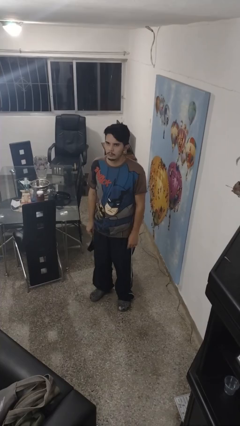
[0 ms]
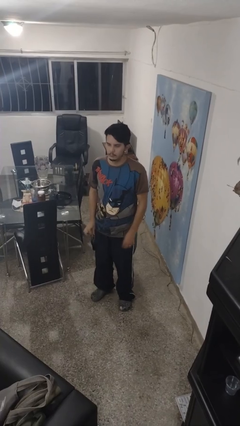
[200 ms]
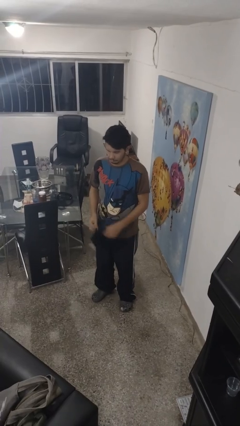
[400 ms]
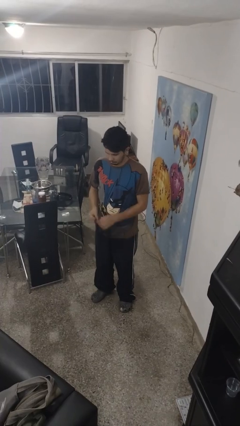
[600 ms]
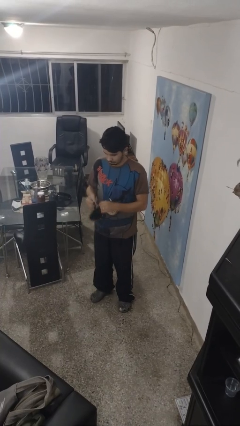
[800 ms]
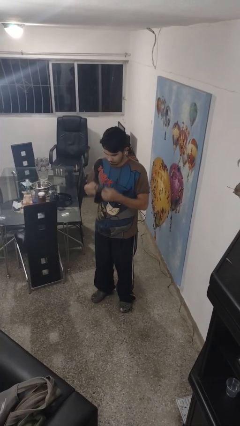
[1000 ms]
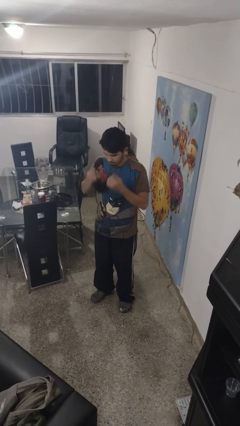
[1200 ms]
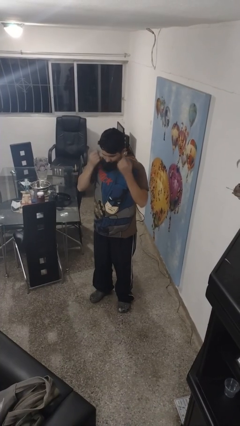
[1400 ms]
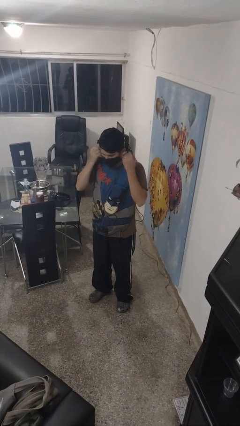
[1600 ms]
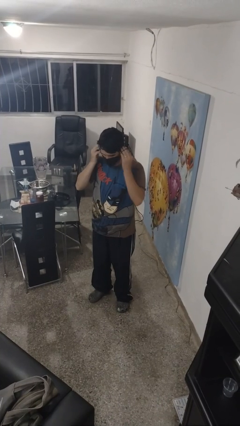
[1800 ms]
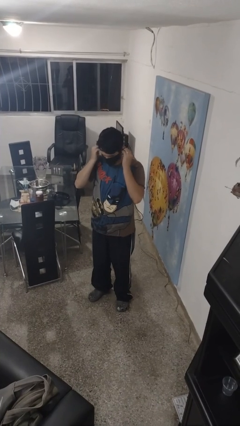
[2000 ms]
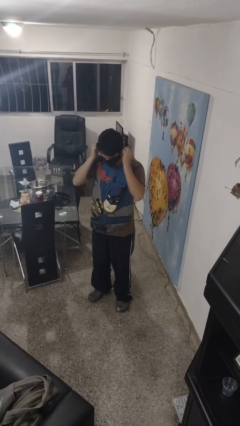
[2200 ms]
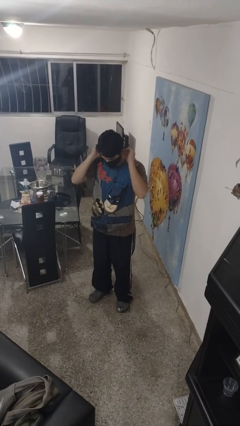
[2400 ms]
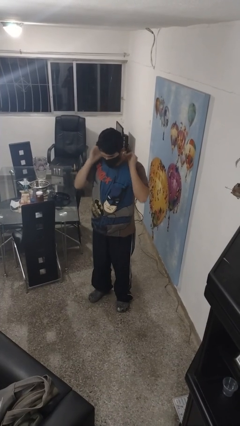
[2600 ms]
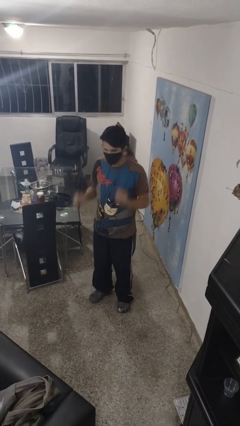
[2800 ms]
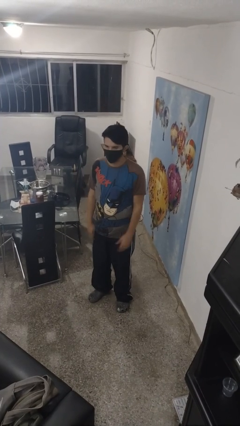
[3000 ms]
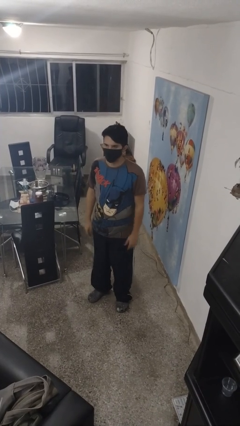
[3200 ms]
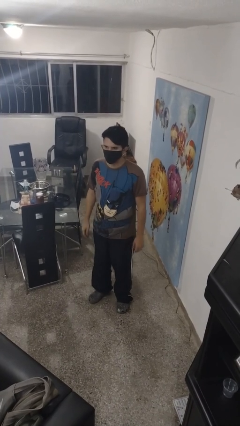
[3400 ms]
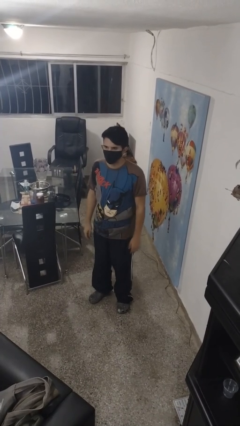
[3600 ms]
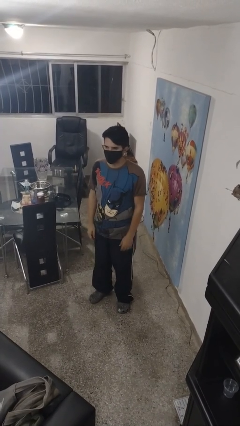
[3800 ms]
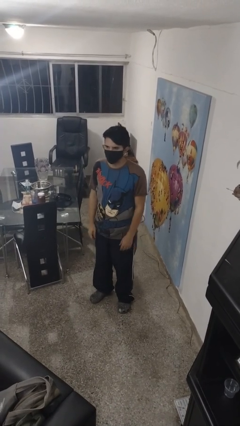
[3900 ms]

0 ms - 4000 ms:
person puts on facemask

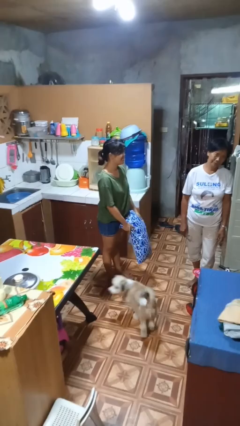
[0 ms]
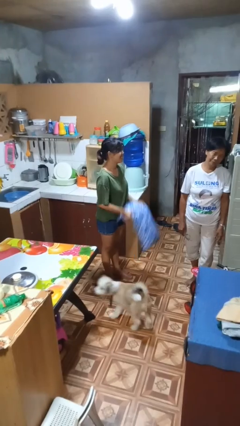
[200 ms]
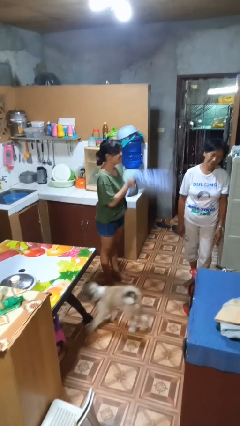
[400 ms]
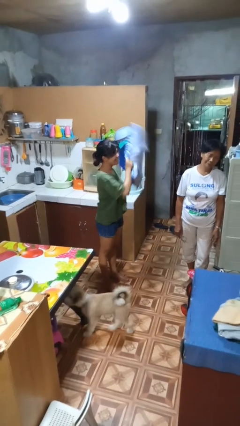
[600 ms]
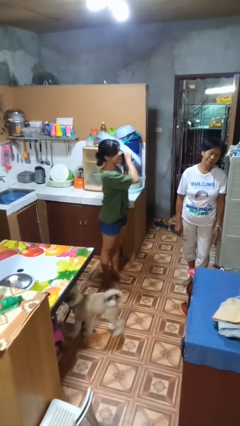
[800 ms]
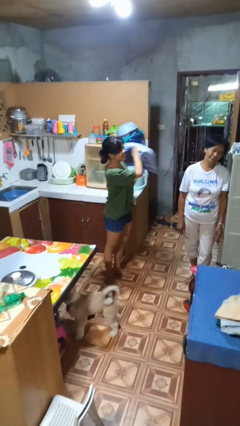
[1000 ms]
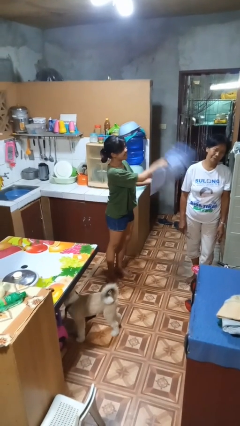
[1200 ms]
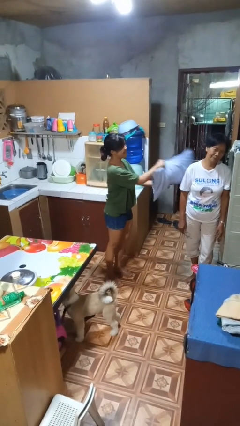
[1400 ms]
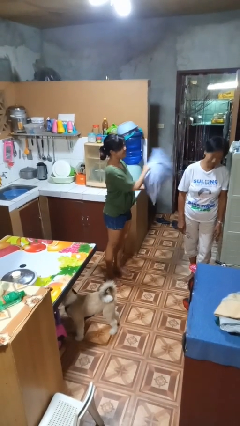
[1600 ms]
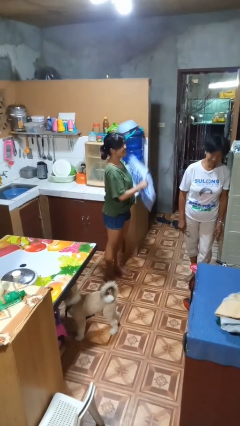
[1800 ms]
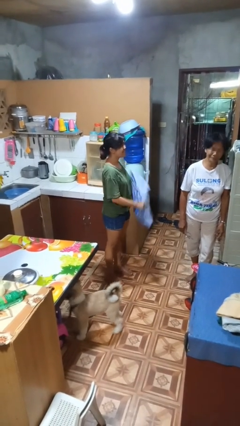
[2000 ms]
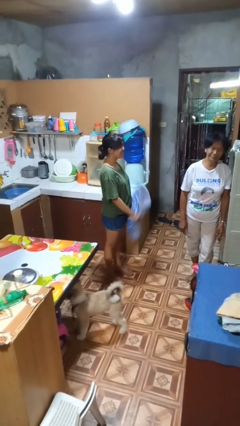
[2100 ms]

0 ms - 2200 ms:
person hits person with pillow

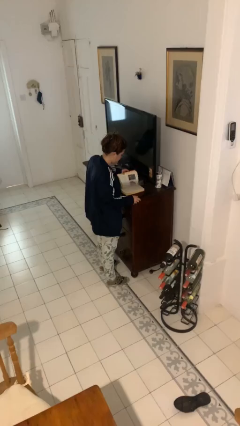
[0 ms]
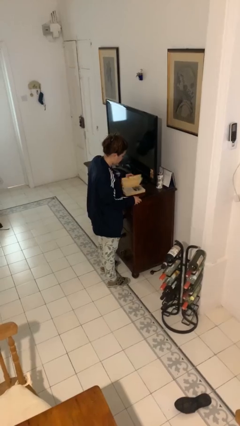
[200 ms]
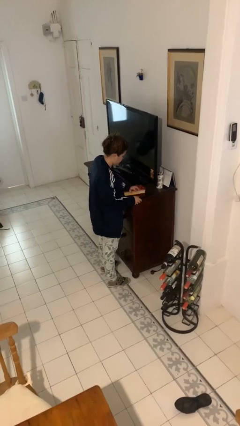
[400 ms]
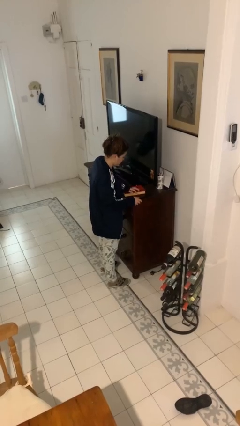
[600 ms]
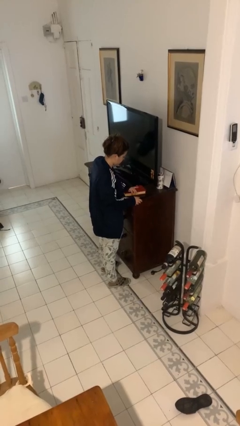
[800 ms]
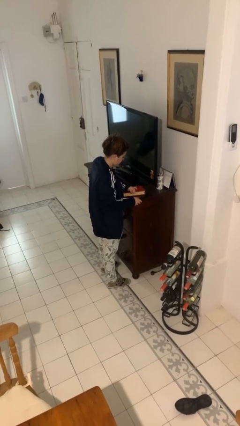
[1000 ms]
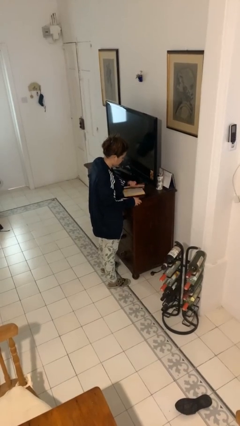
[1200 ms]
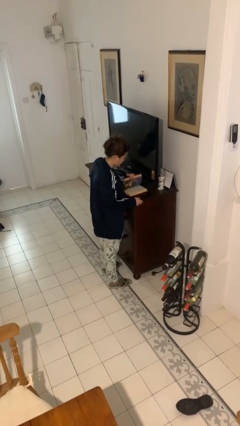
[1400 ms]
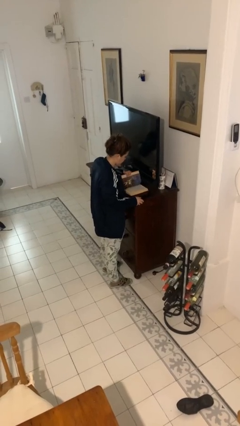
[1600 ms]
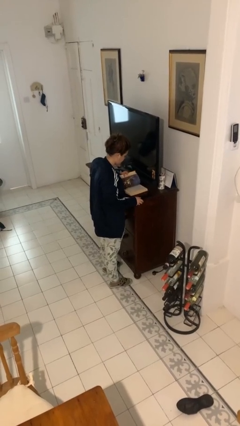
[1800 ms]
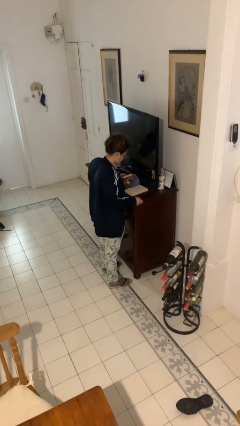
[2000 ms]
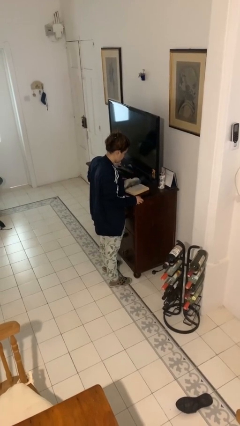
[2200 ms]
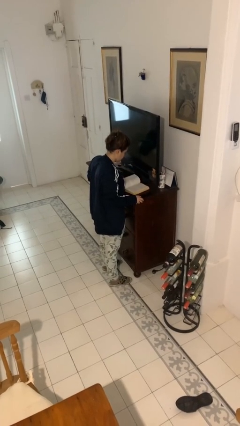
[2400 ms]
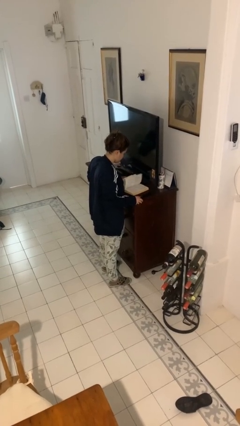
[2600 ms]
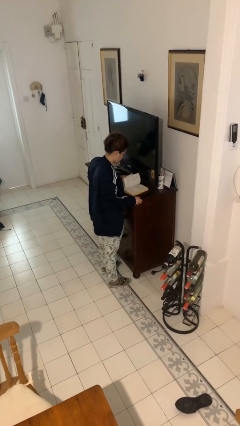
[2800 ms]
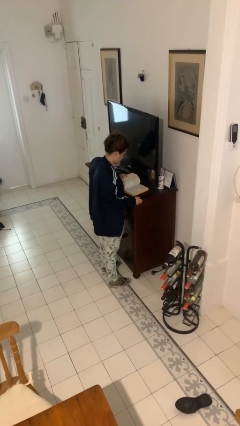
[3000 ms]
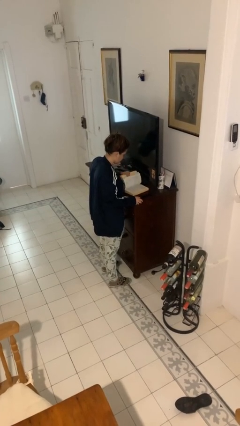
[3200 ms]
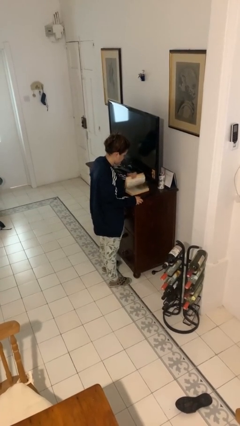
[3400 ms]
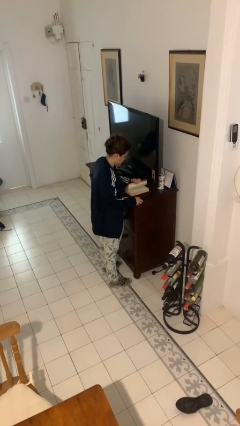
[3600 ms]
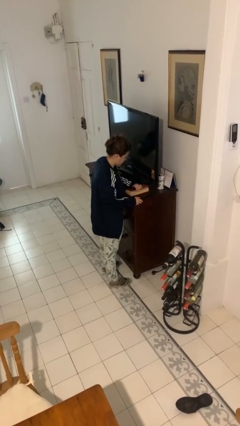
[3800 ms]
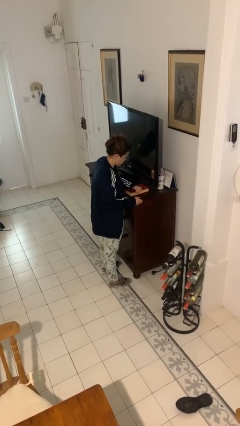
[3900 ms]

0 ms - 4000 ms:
person reads book

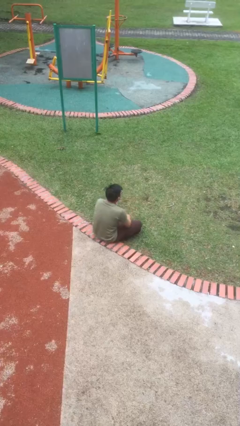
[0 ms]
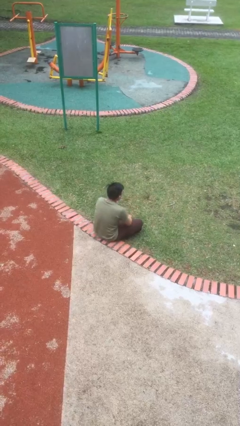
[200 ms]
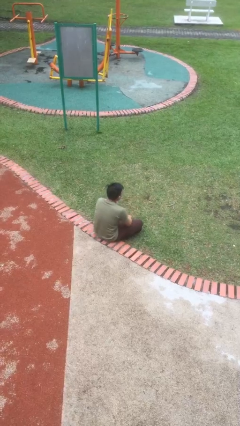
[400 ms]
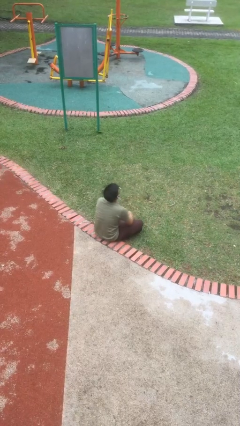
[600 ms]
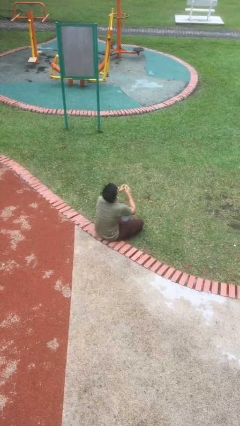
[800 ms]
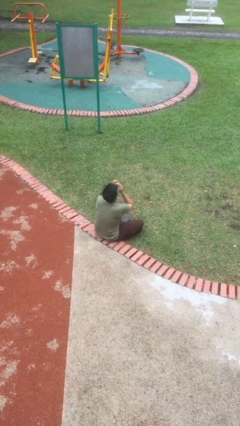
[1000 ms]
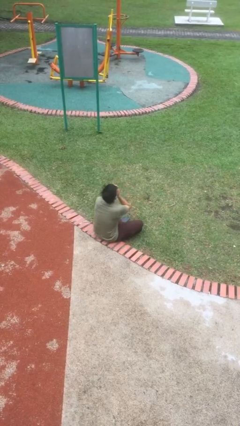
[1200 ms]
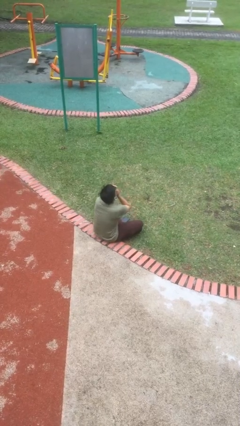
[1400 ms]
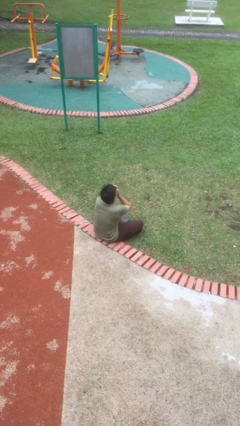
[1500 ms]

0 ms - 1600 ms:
person sneezes into hand

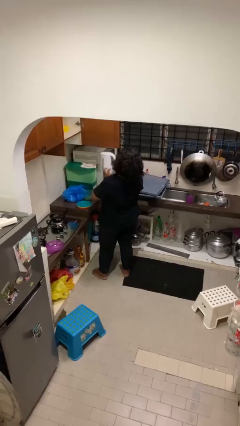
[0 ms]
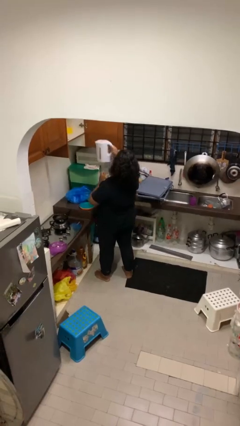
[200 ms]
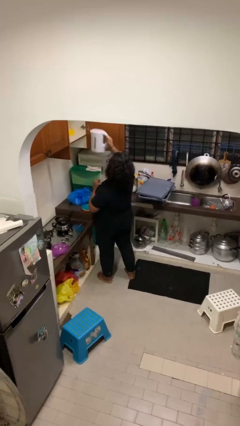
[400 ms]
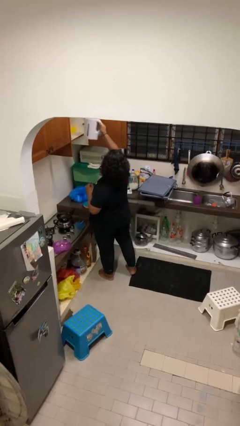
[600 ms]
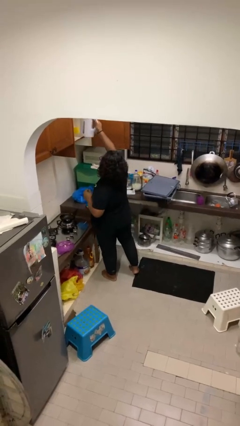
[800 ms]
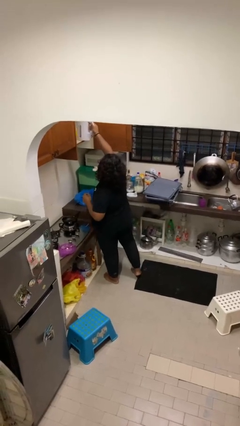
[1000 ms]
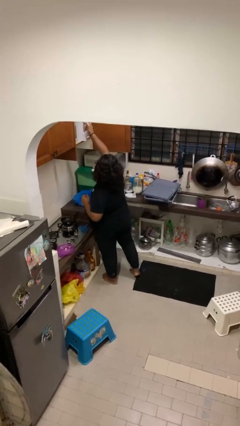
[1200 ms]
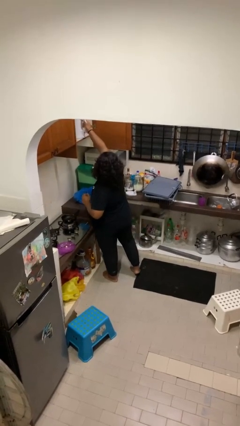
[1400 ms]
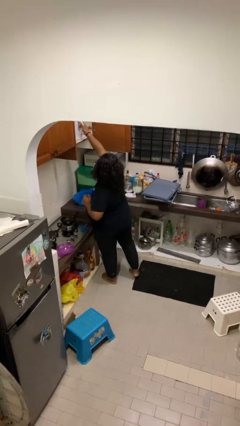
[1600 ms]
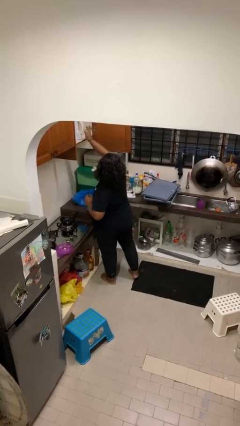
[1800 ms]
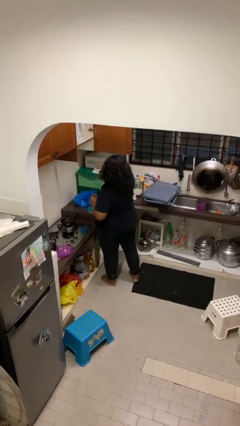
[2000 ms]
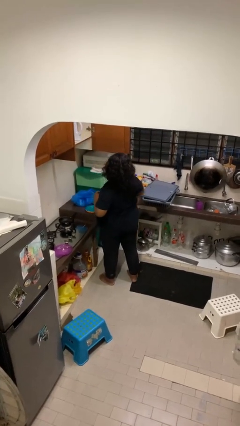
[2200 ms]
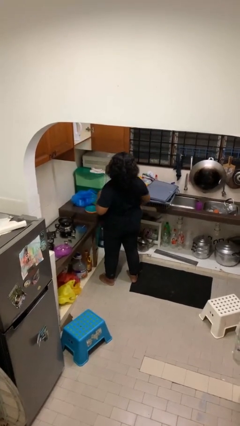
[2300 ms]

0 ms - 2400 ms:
person puts object in cabinet

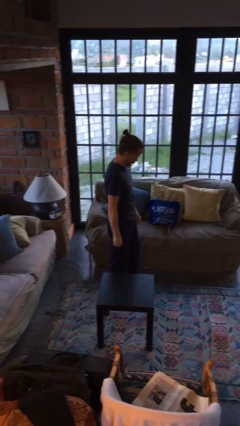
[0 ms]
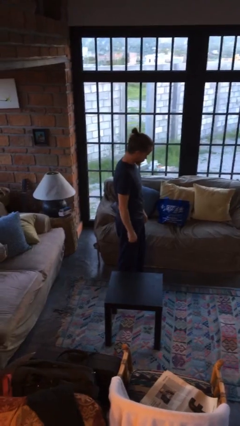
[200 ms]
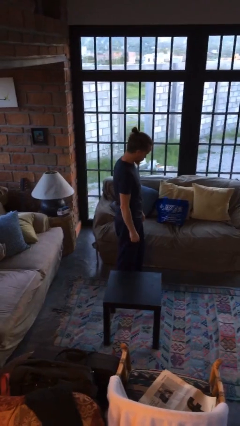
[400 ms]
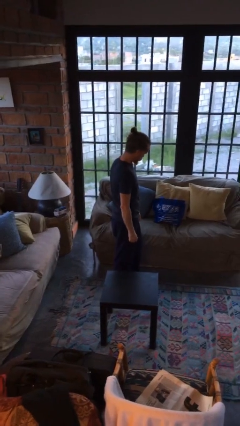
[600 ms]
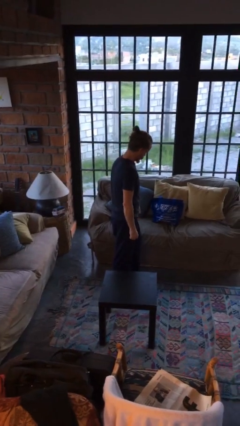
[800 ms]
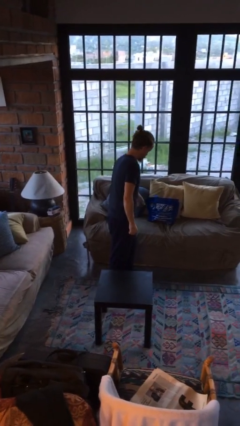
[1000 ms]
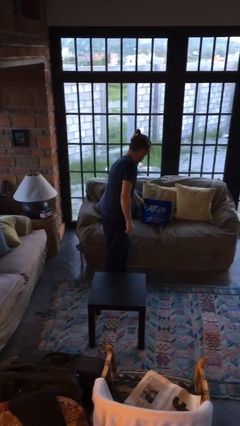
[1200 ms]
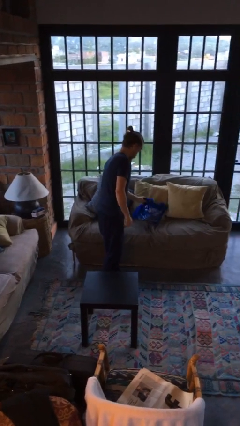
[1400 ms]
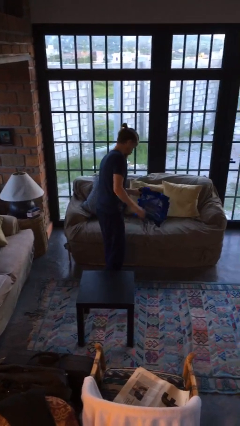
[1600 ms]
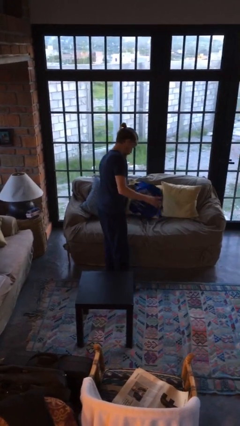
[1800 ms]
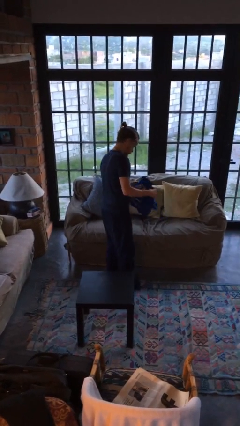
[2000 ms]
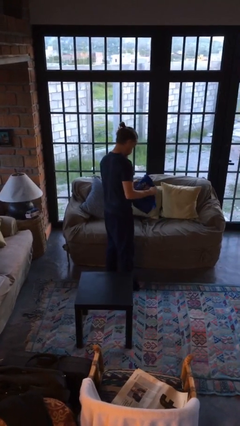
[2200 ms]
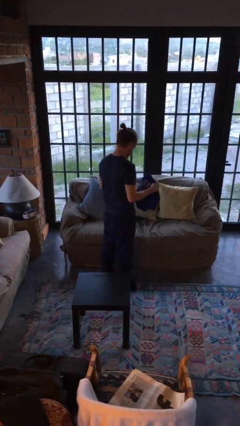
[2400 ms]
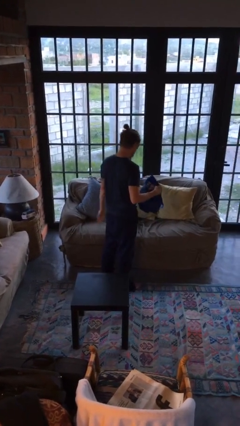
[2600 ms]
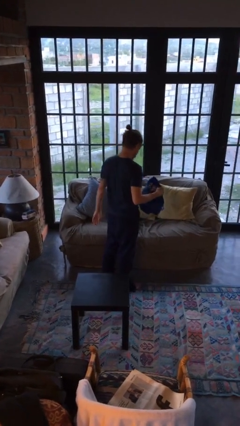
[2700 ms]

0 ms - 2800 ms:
person picks up object from couch

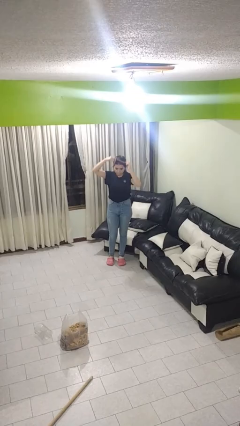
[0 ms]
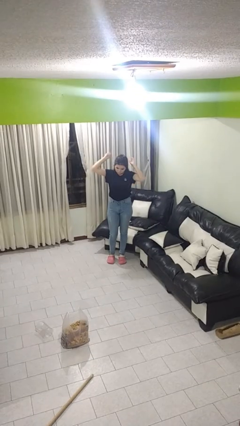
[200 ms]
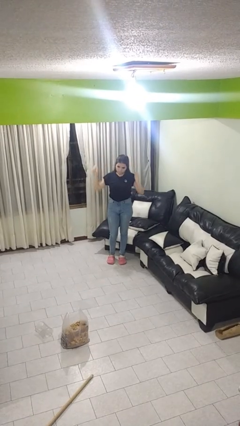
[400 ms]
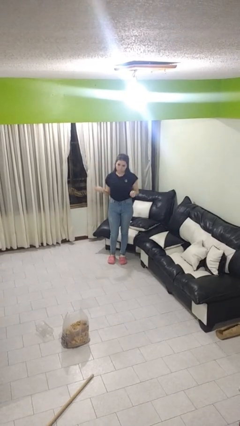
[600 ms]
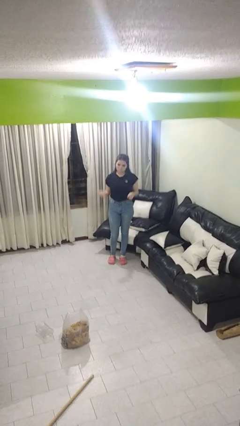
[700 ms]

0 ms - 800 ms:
person takes off necklace
